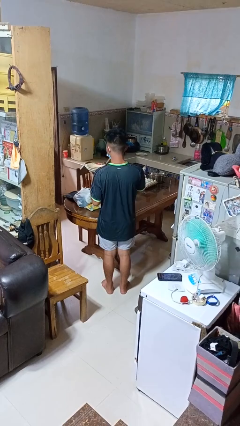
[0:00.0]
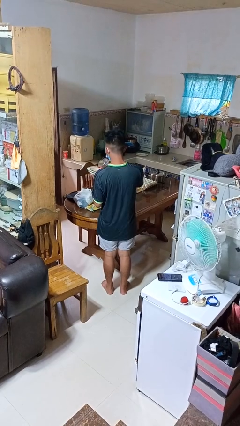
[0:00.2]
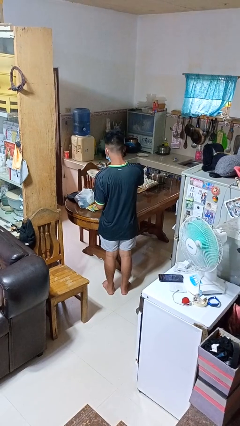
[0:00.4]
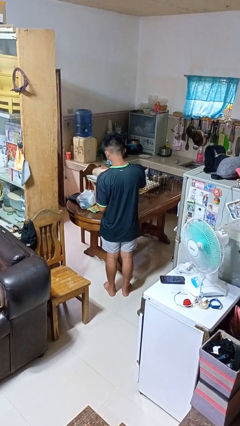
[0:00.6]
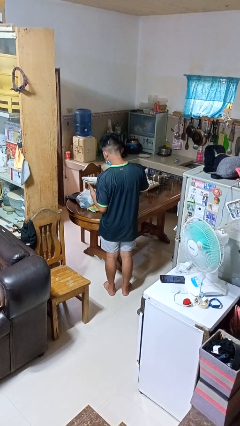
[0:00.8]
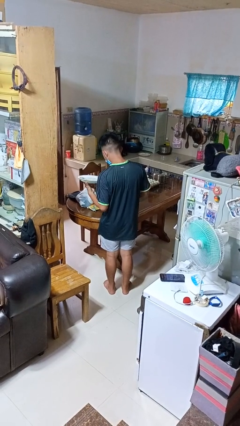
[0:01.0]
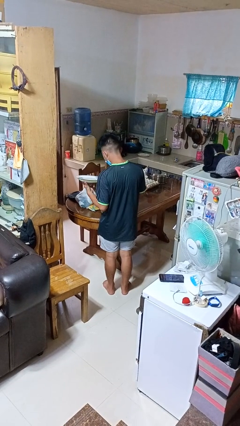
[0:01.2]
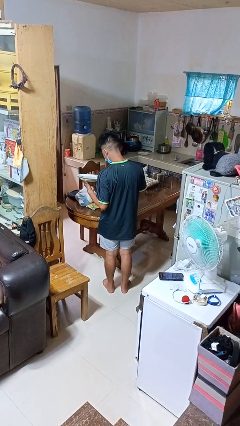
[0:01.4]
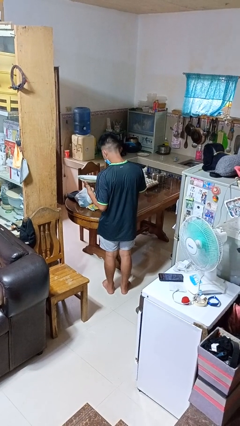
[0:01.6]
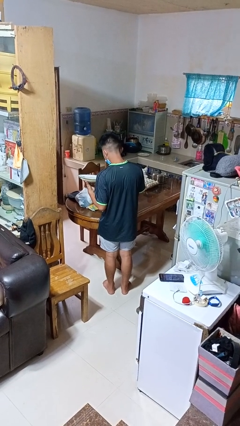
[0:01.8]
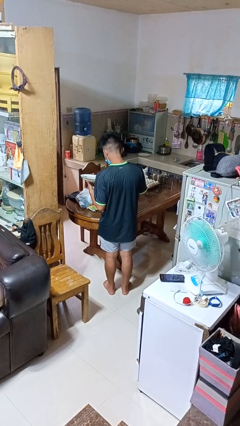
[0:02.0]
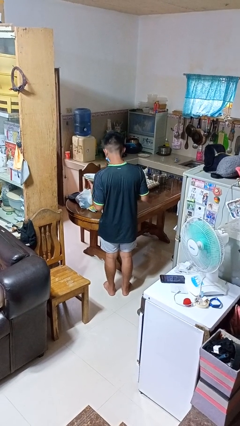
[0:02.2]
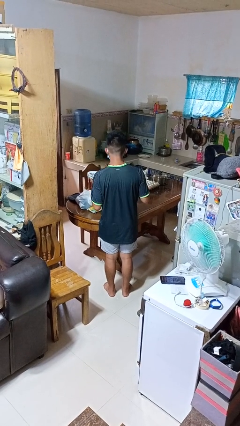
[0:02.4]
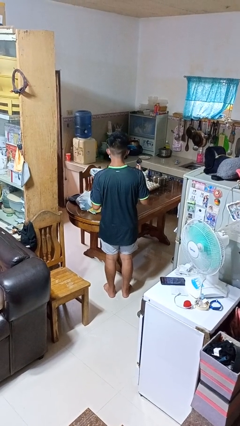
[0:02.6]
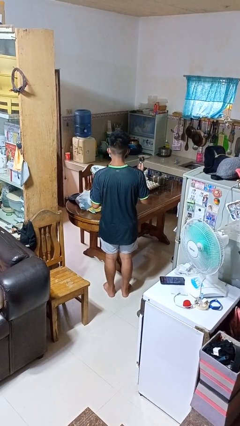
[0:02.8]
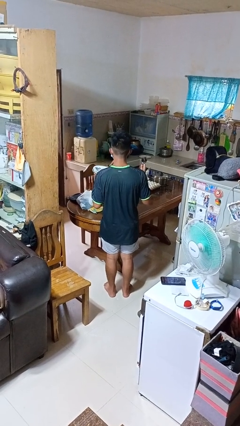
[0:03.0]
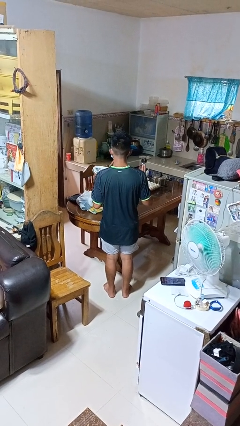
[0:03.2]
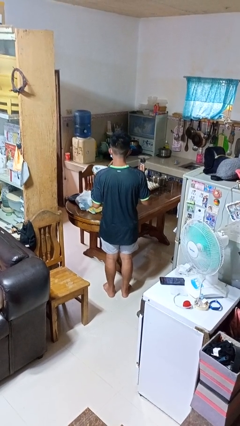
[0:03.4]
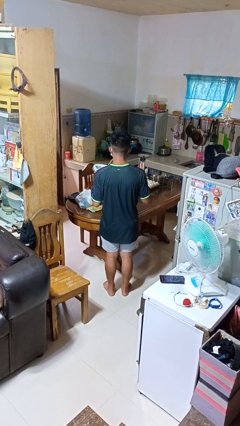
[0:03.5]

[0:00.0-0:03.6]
person sets table

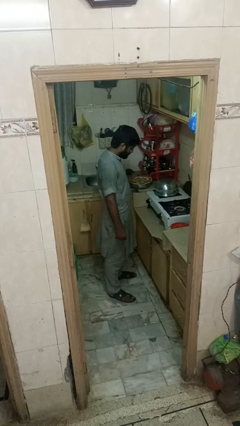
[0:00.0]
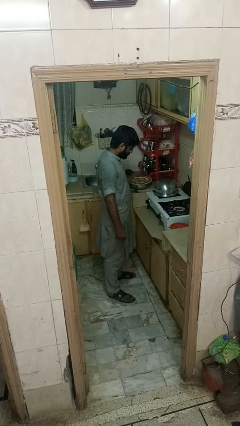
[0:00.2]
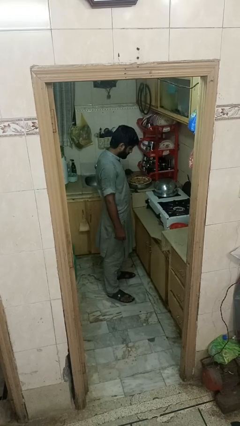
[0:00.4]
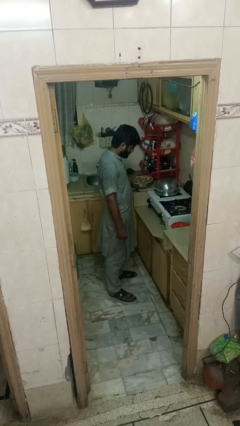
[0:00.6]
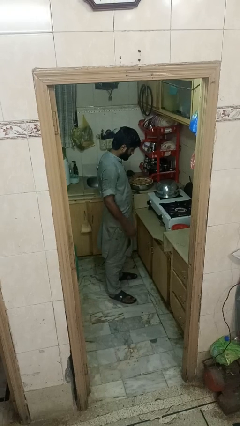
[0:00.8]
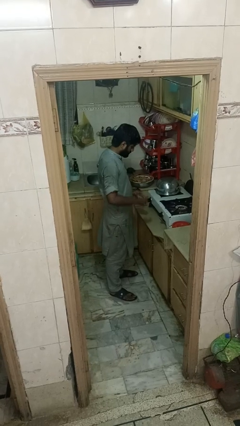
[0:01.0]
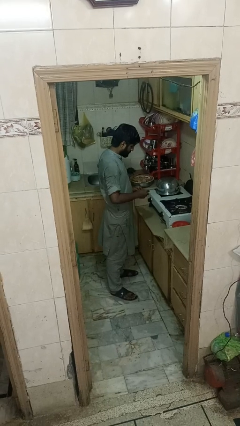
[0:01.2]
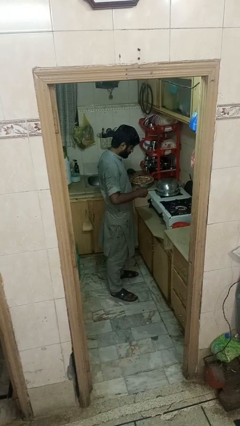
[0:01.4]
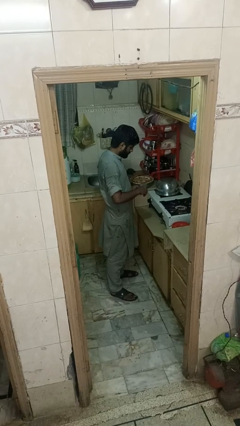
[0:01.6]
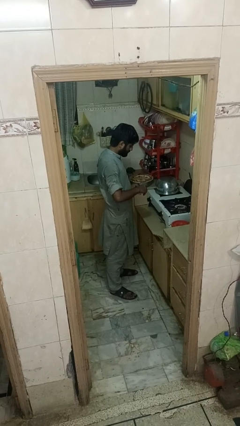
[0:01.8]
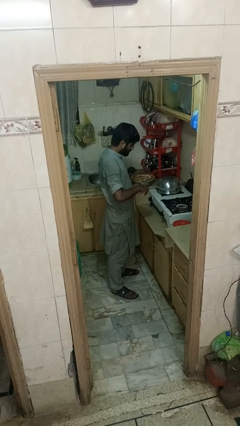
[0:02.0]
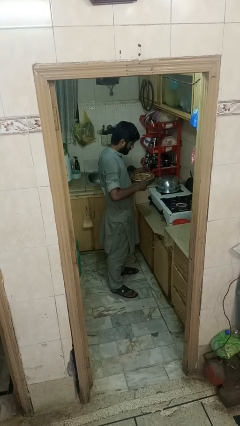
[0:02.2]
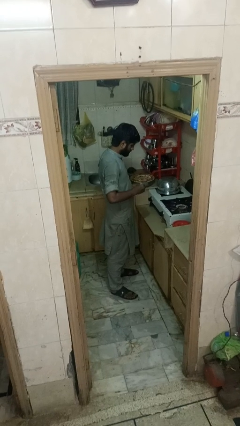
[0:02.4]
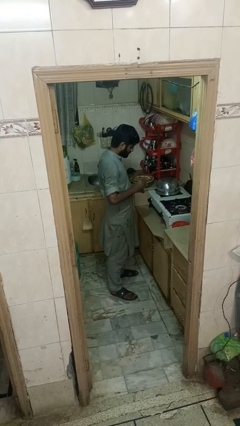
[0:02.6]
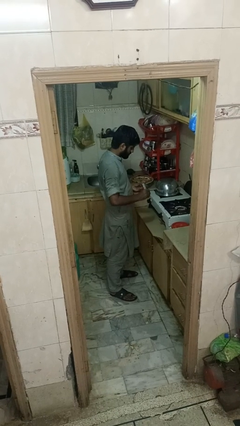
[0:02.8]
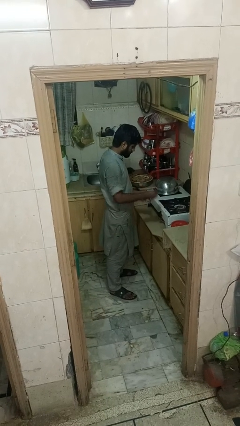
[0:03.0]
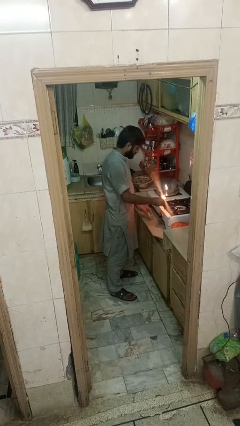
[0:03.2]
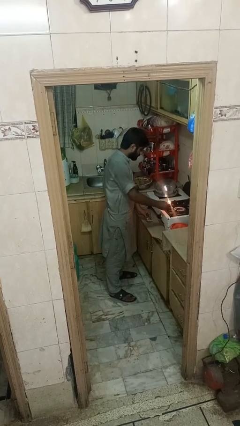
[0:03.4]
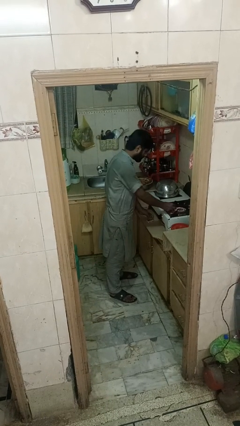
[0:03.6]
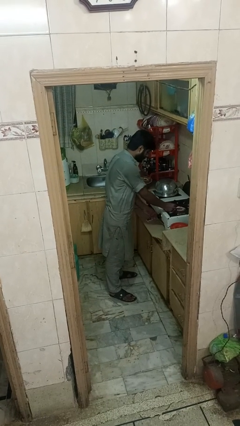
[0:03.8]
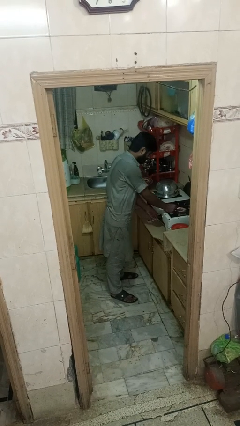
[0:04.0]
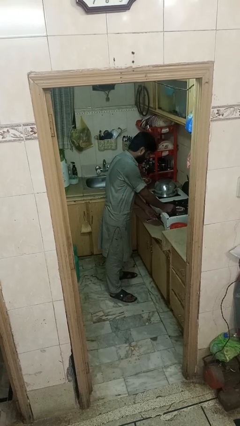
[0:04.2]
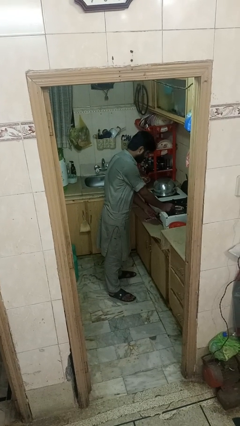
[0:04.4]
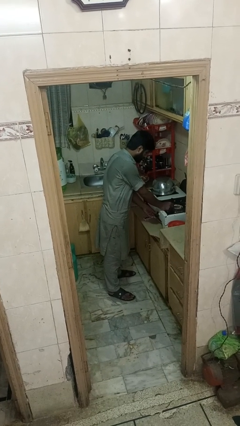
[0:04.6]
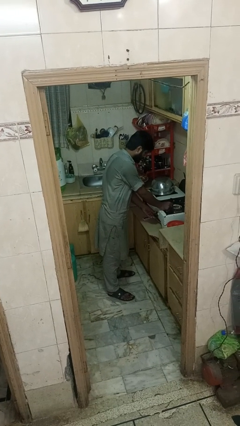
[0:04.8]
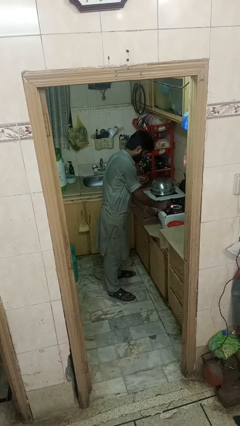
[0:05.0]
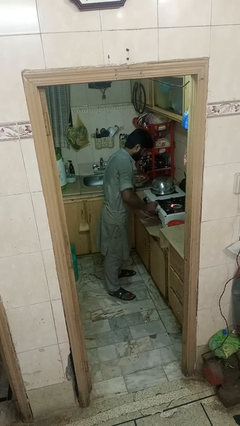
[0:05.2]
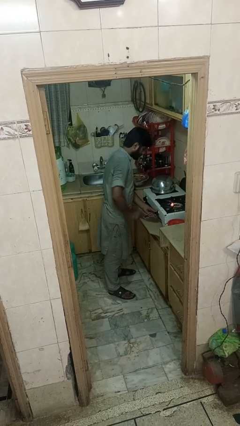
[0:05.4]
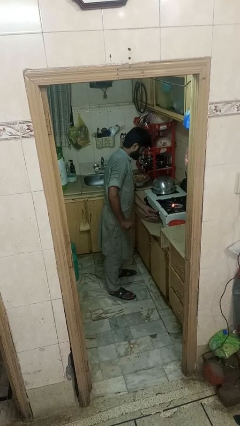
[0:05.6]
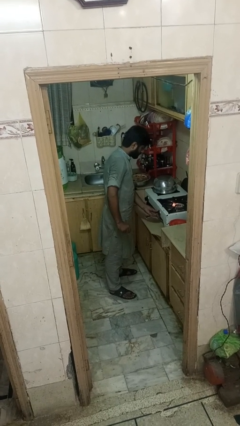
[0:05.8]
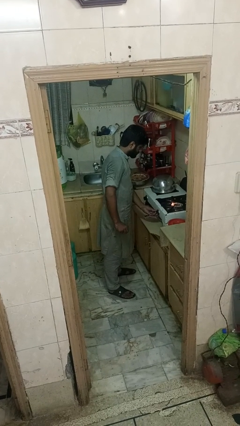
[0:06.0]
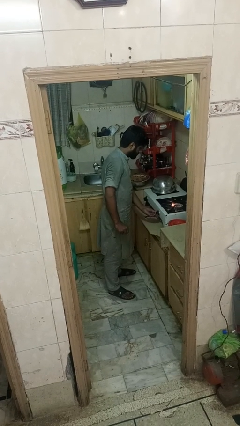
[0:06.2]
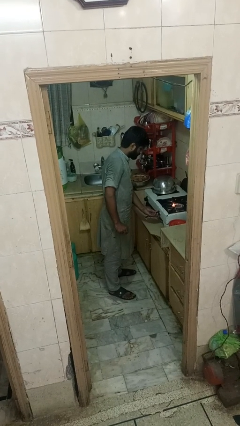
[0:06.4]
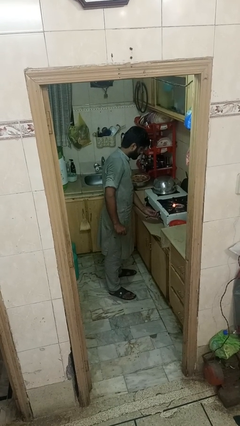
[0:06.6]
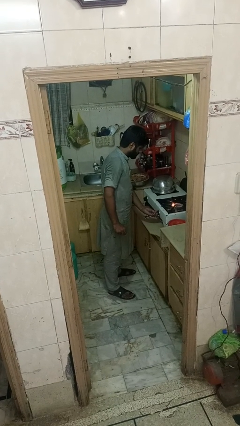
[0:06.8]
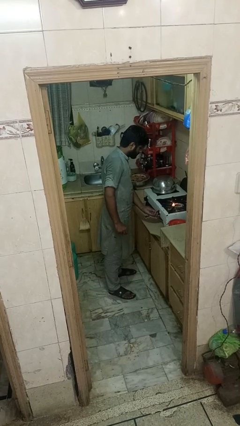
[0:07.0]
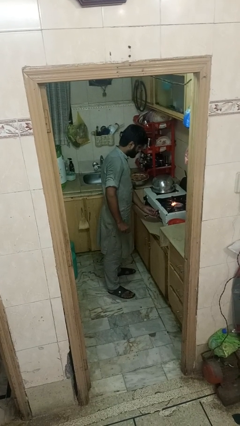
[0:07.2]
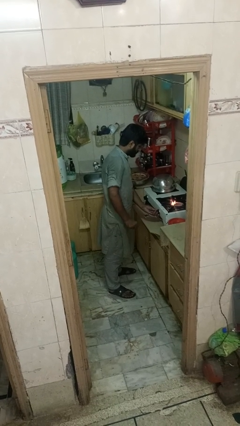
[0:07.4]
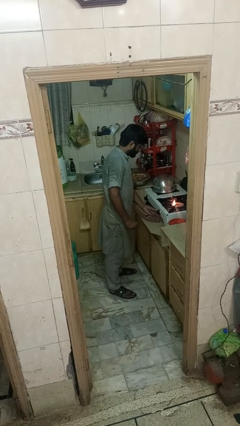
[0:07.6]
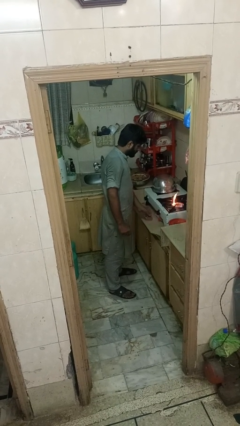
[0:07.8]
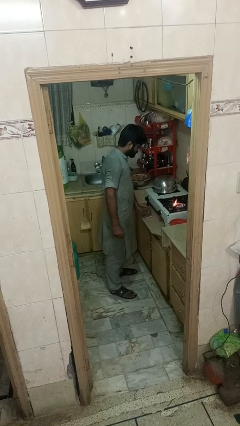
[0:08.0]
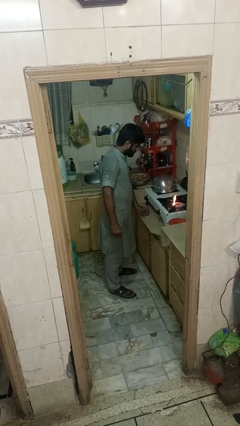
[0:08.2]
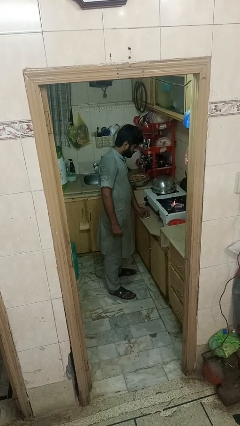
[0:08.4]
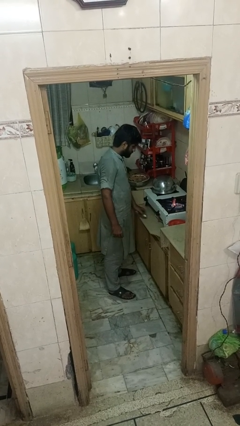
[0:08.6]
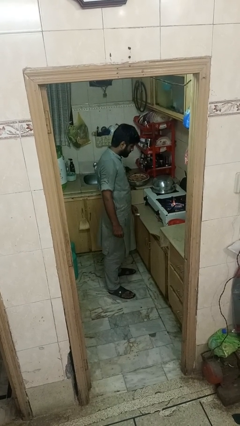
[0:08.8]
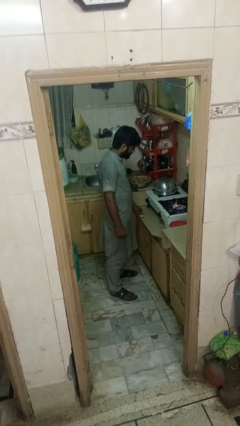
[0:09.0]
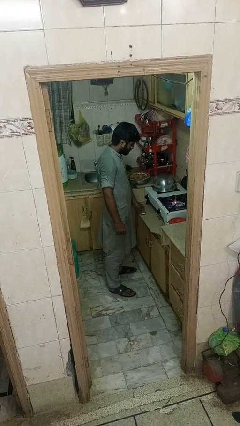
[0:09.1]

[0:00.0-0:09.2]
person turns on stovetop

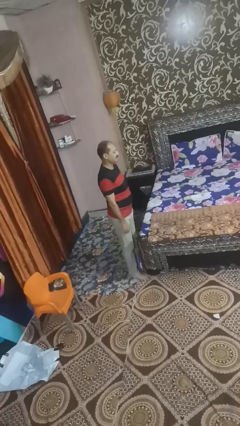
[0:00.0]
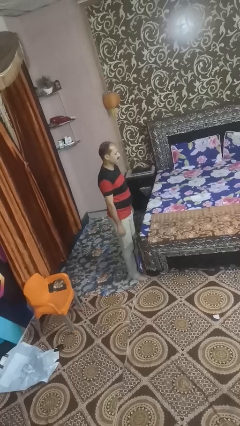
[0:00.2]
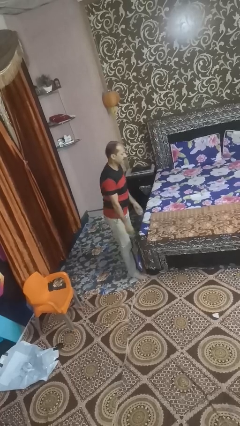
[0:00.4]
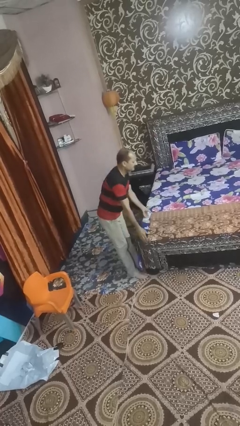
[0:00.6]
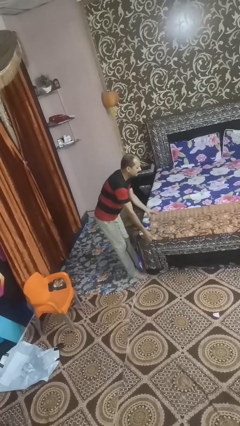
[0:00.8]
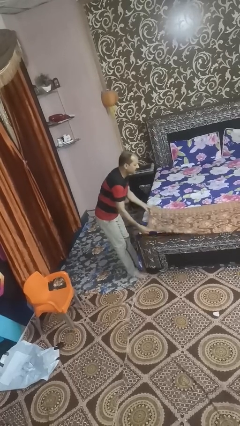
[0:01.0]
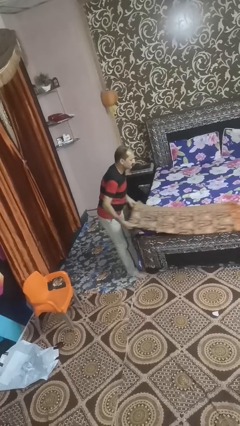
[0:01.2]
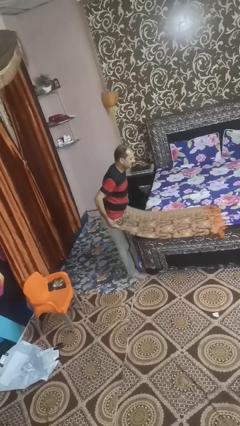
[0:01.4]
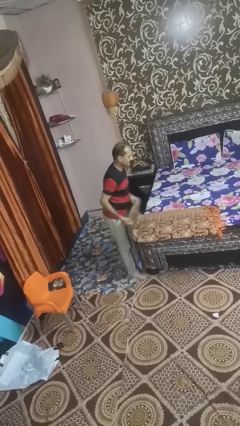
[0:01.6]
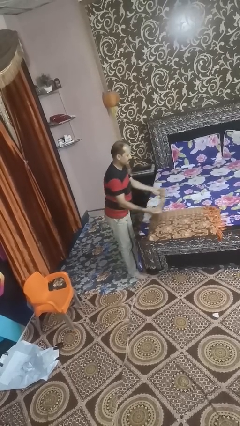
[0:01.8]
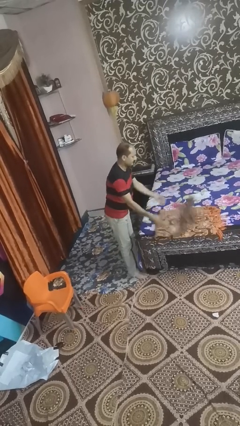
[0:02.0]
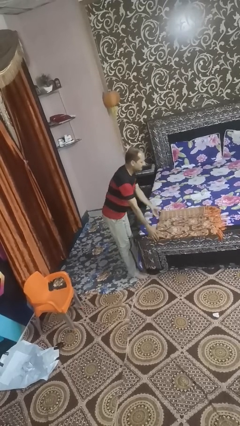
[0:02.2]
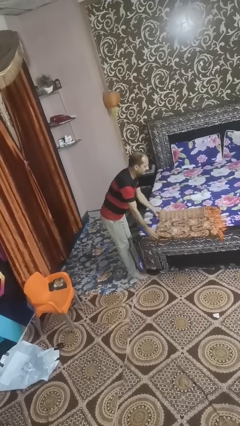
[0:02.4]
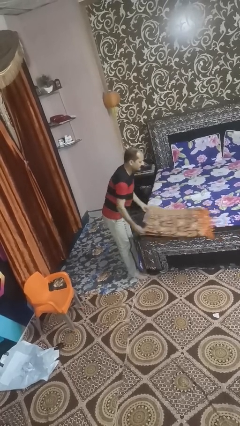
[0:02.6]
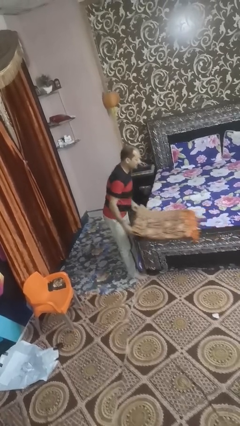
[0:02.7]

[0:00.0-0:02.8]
person folds blanket

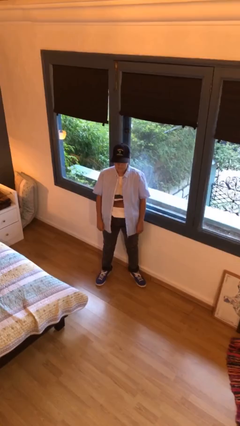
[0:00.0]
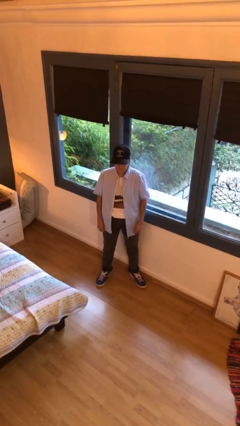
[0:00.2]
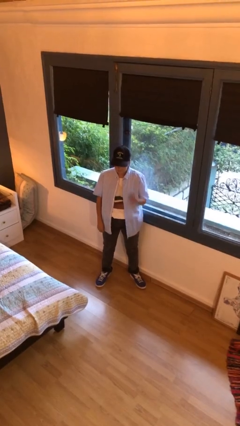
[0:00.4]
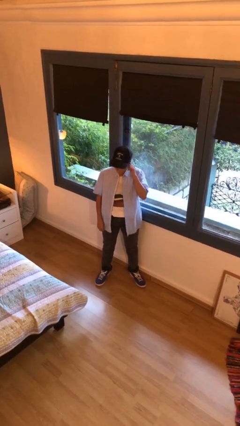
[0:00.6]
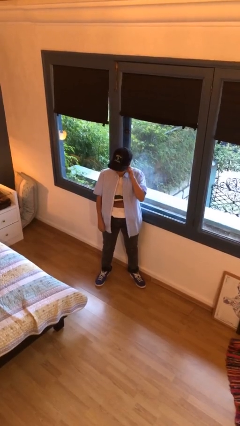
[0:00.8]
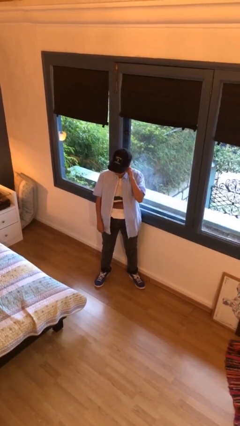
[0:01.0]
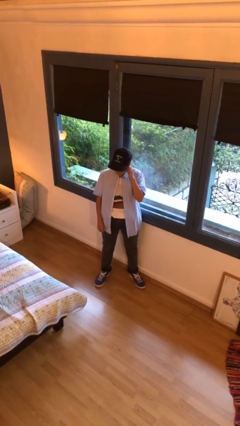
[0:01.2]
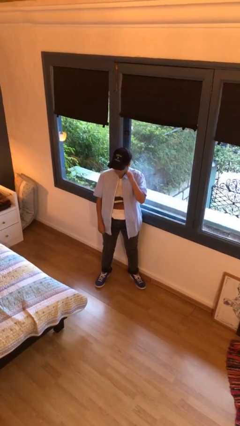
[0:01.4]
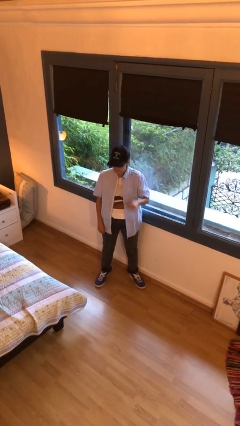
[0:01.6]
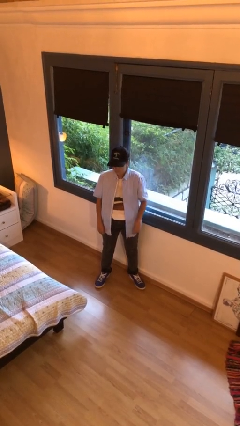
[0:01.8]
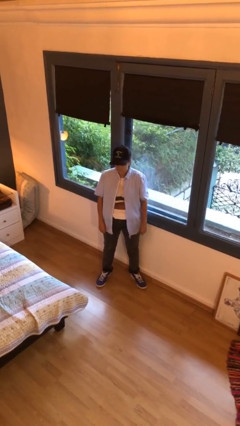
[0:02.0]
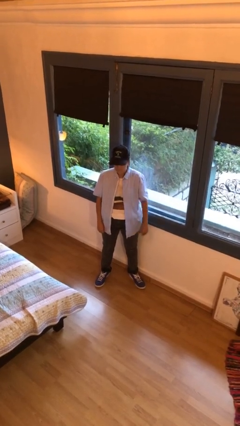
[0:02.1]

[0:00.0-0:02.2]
person touches earlobe
